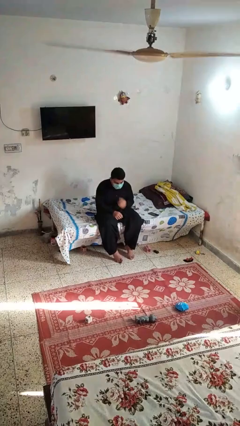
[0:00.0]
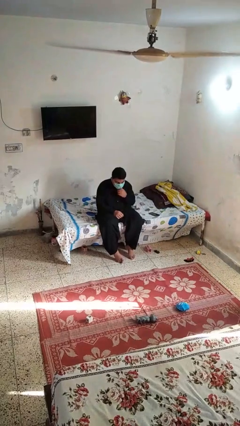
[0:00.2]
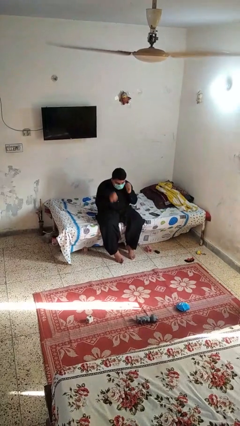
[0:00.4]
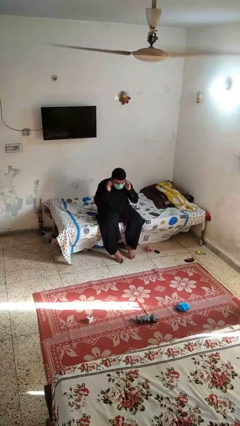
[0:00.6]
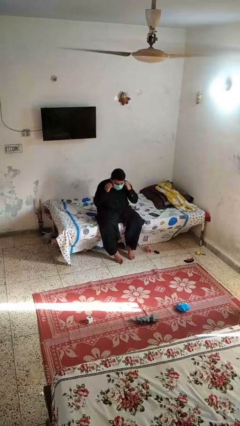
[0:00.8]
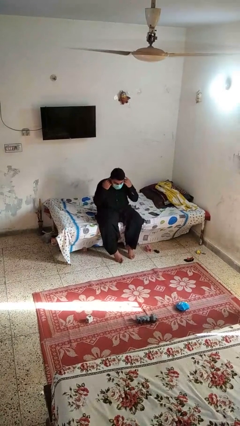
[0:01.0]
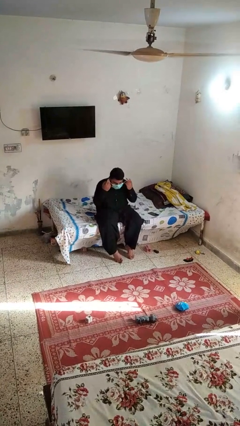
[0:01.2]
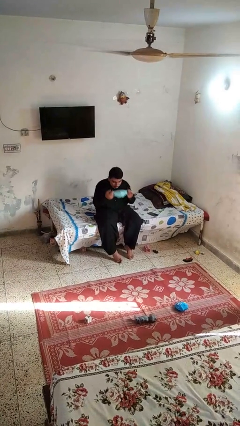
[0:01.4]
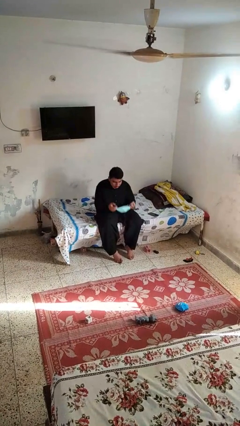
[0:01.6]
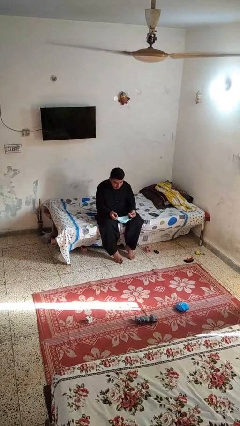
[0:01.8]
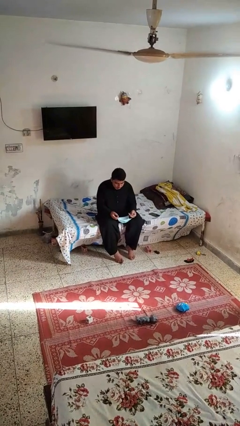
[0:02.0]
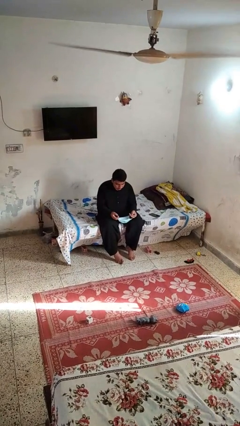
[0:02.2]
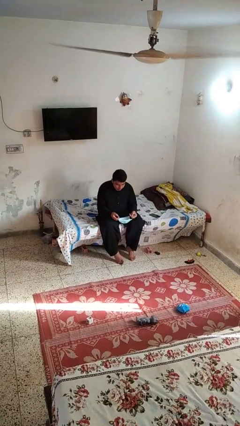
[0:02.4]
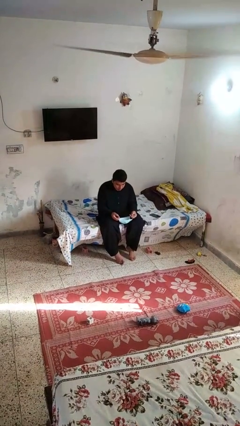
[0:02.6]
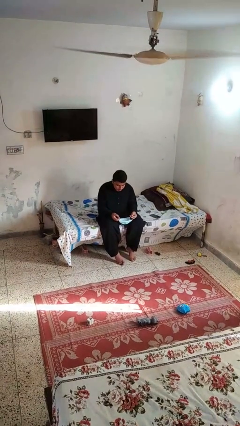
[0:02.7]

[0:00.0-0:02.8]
person takes off facemask

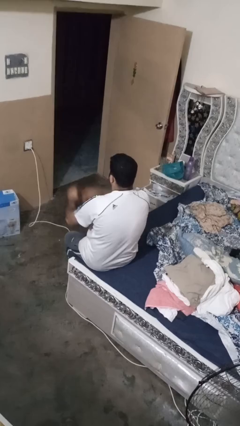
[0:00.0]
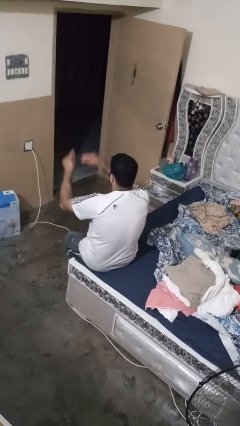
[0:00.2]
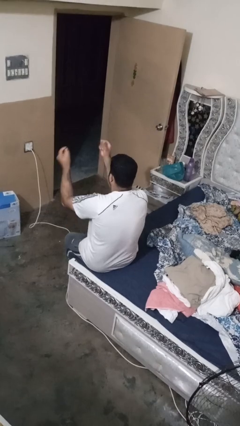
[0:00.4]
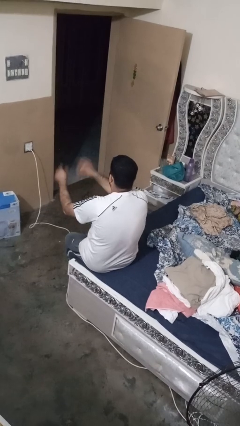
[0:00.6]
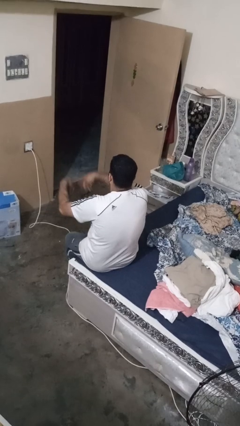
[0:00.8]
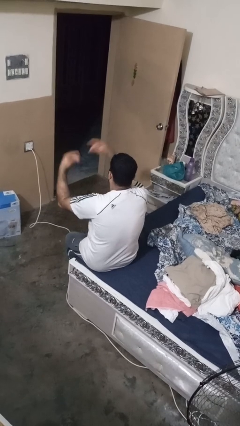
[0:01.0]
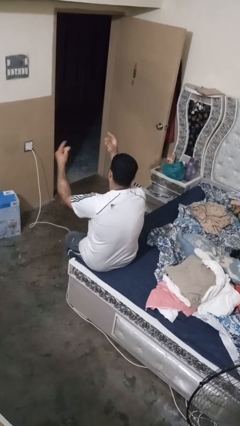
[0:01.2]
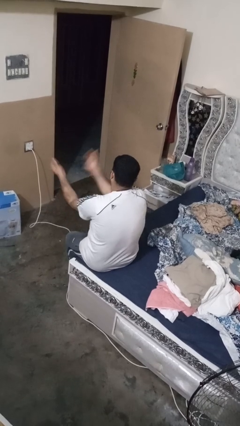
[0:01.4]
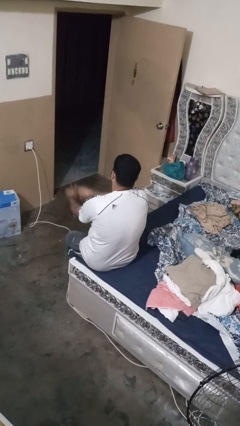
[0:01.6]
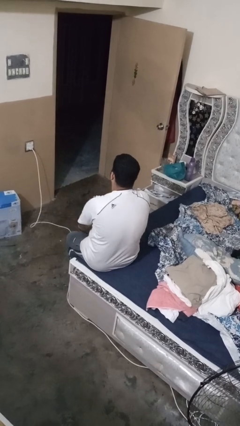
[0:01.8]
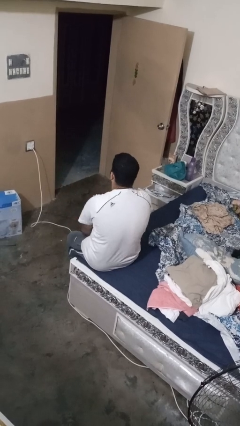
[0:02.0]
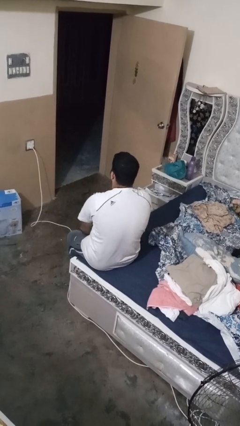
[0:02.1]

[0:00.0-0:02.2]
person snaps fingers

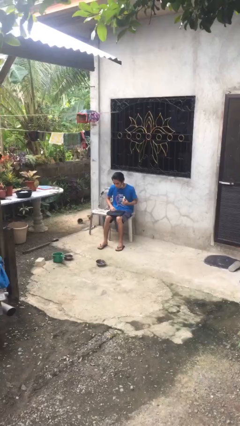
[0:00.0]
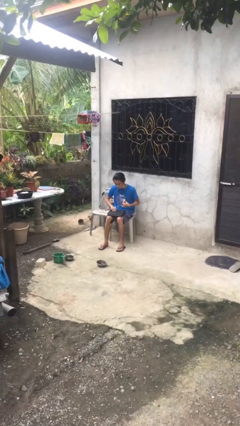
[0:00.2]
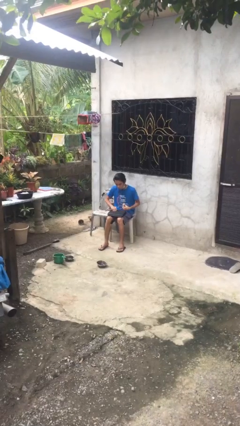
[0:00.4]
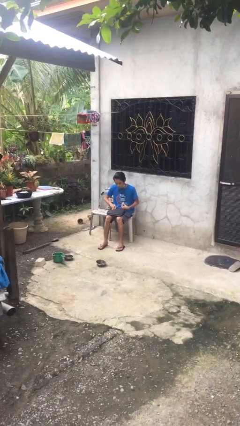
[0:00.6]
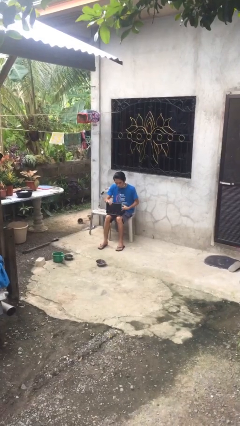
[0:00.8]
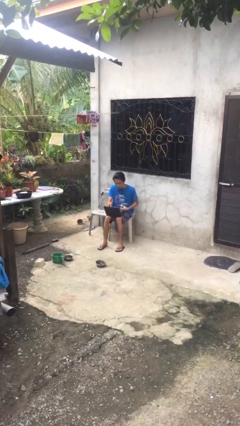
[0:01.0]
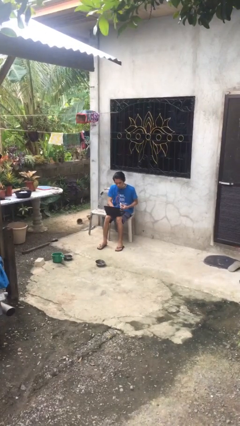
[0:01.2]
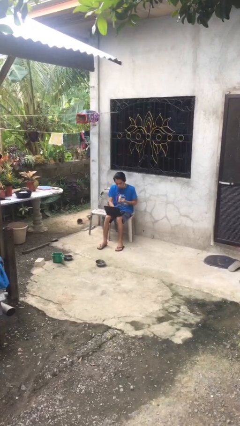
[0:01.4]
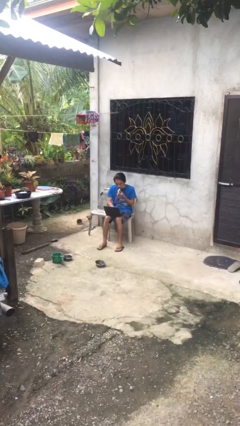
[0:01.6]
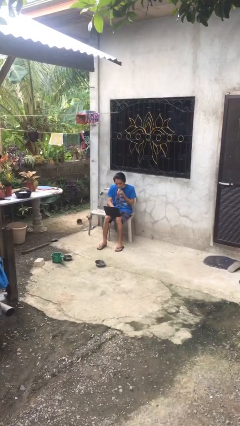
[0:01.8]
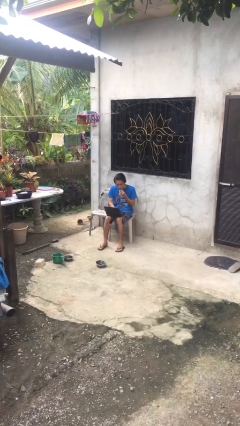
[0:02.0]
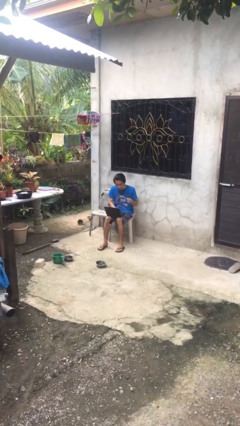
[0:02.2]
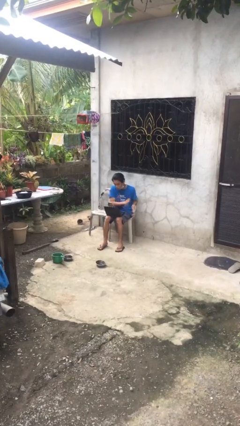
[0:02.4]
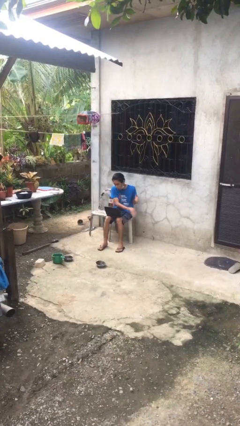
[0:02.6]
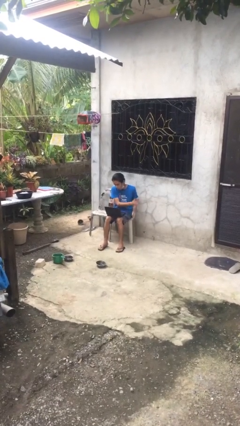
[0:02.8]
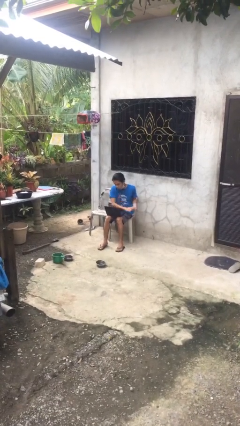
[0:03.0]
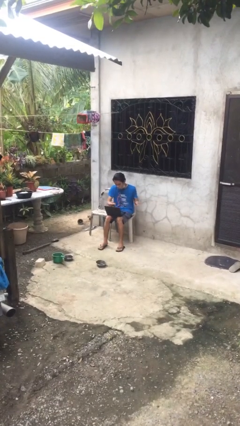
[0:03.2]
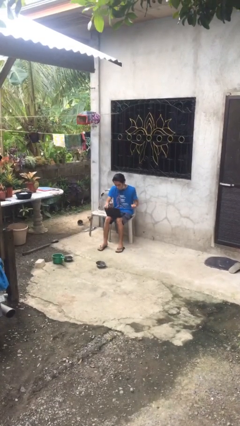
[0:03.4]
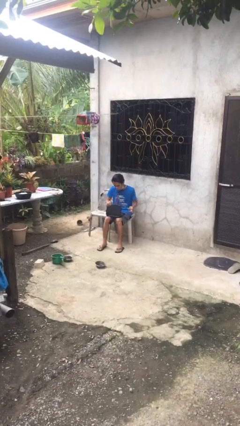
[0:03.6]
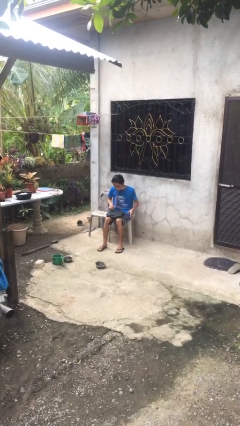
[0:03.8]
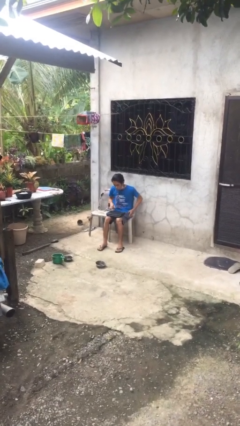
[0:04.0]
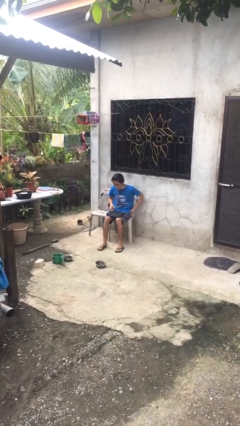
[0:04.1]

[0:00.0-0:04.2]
person interacts with laptop

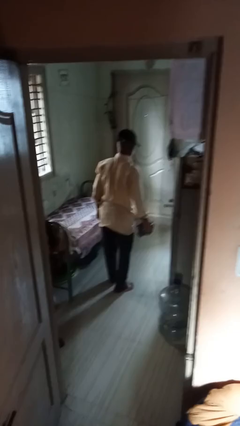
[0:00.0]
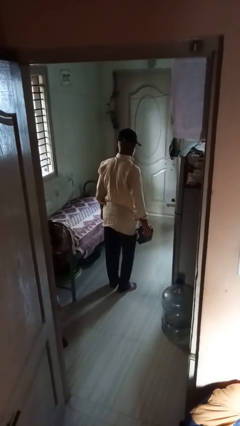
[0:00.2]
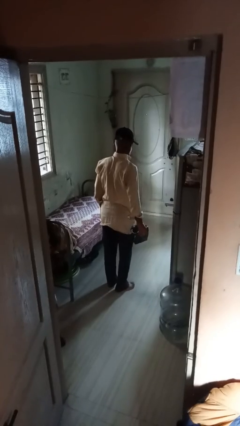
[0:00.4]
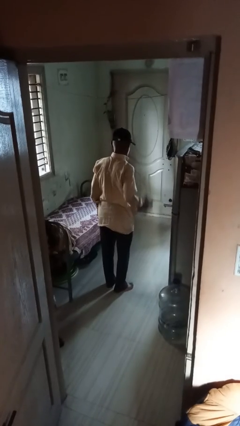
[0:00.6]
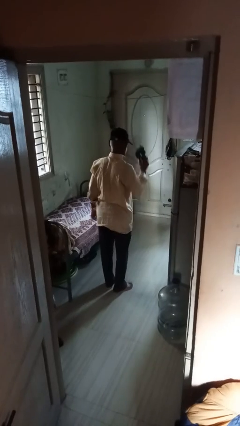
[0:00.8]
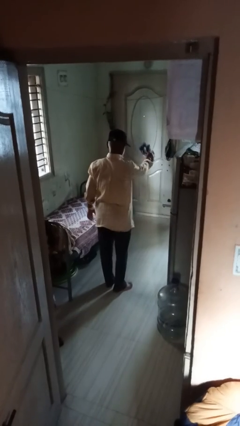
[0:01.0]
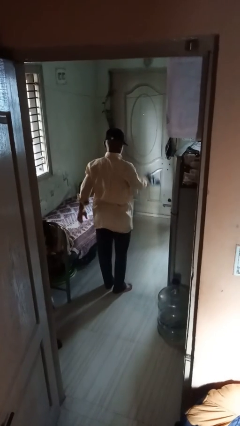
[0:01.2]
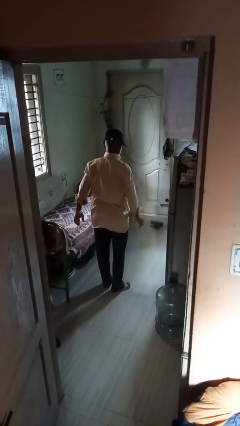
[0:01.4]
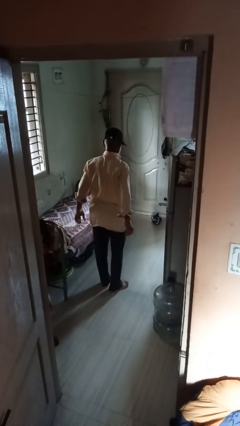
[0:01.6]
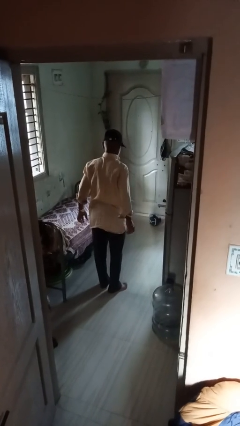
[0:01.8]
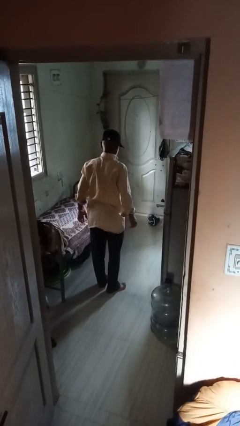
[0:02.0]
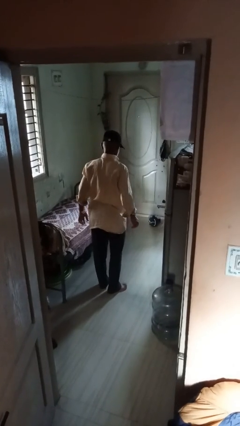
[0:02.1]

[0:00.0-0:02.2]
person throws object to ground

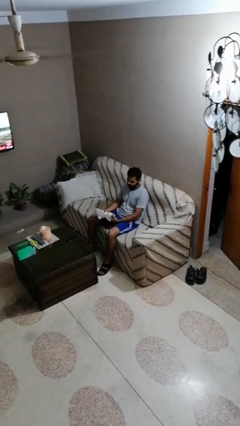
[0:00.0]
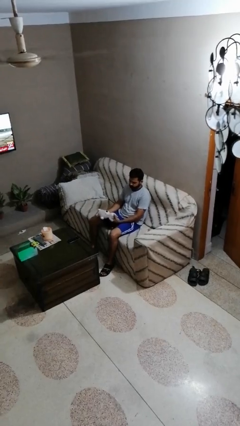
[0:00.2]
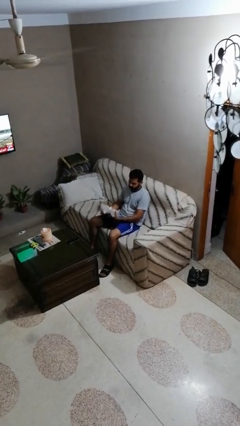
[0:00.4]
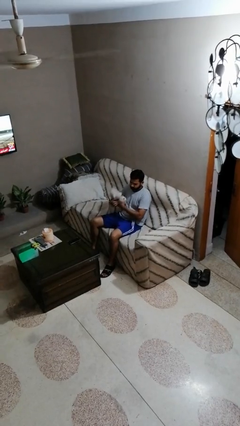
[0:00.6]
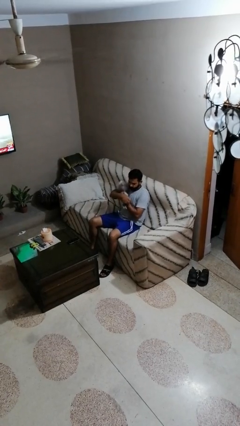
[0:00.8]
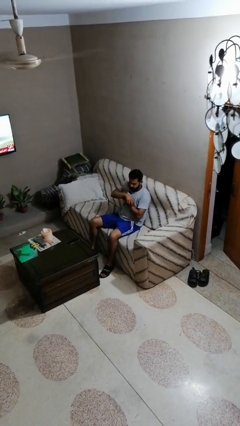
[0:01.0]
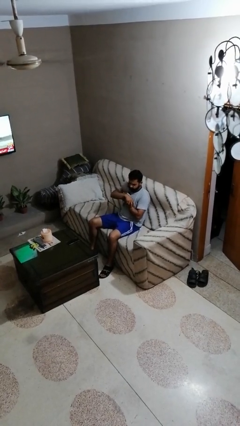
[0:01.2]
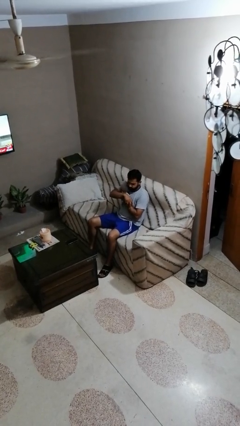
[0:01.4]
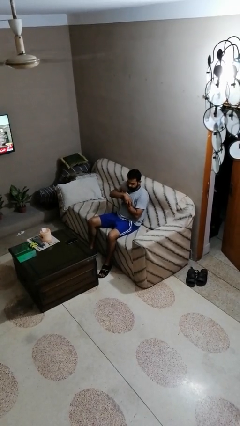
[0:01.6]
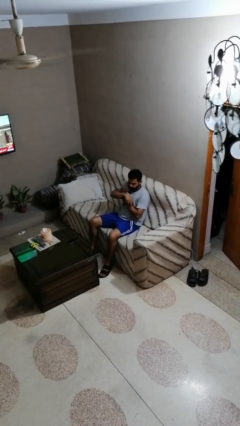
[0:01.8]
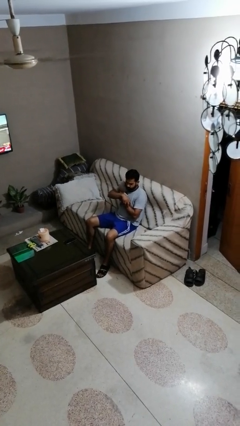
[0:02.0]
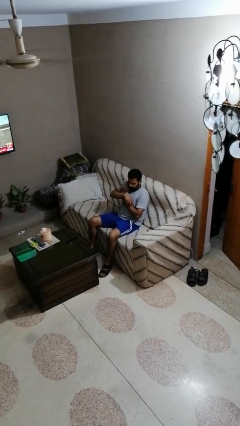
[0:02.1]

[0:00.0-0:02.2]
person hugs stuffed animal

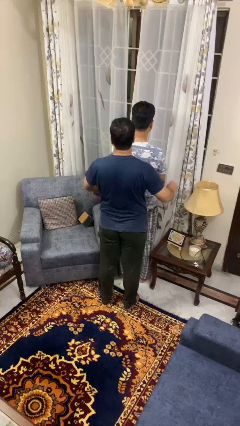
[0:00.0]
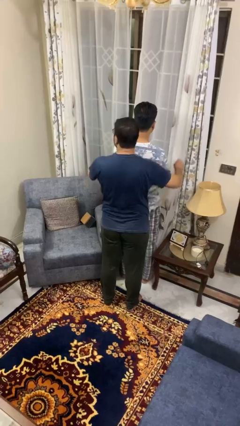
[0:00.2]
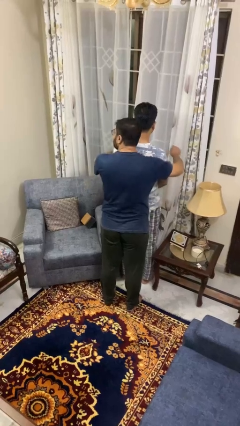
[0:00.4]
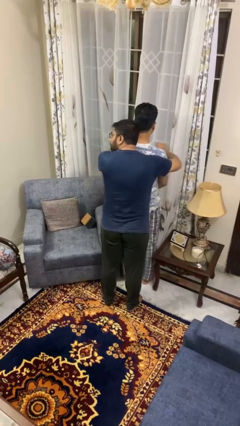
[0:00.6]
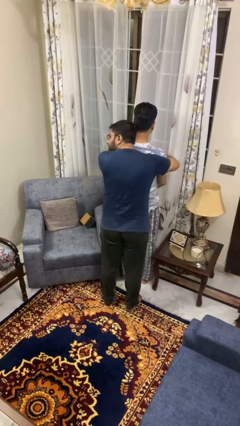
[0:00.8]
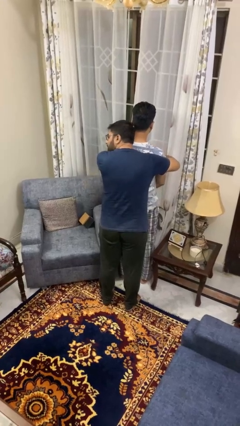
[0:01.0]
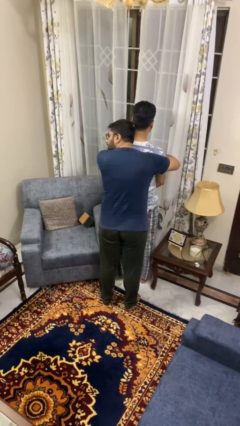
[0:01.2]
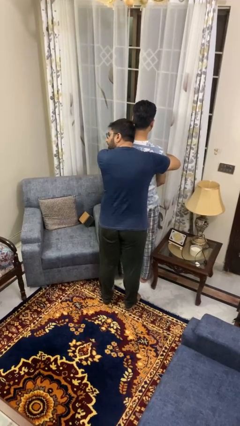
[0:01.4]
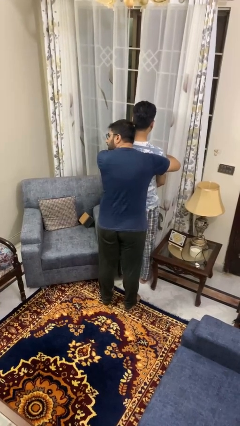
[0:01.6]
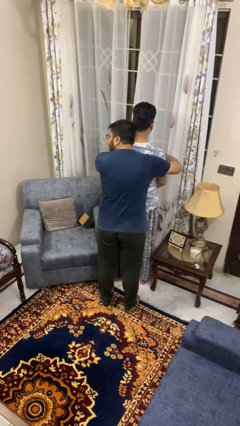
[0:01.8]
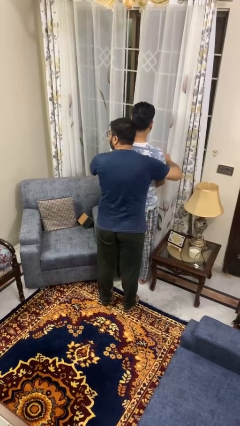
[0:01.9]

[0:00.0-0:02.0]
person hugs person from behind

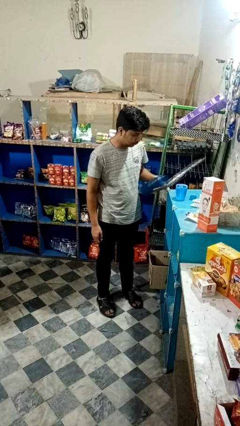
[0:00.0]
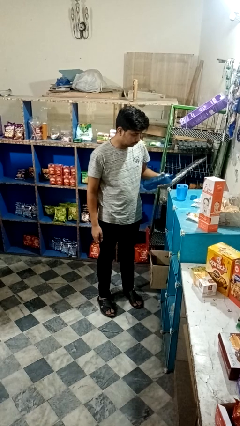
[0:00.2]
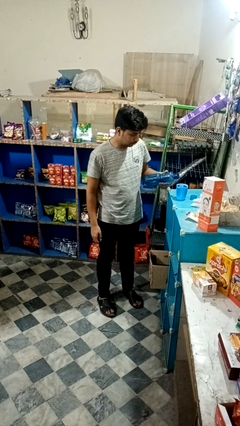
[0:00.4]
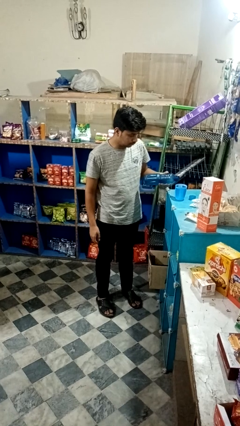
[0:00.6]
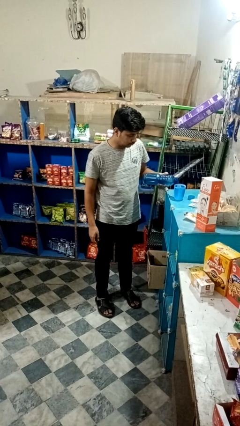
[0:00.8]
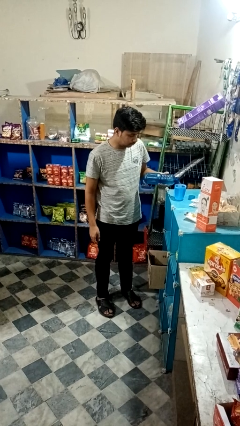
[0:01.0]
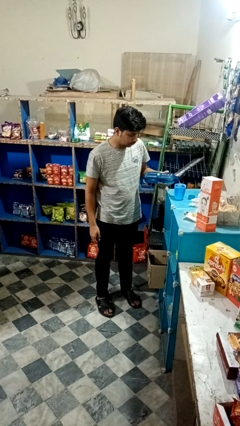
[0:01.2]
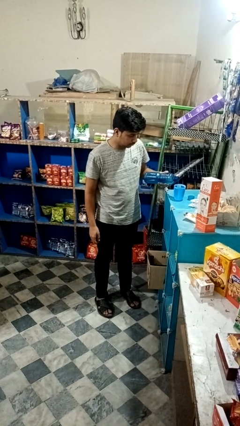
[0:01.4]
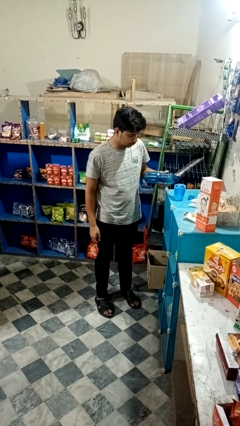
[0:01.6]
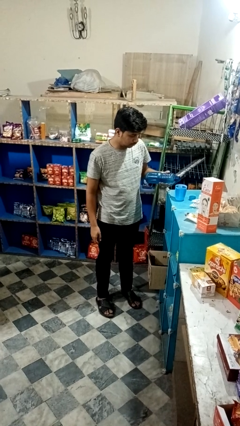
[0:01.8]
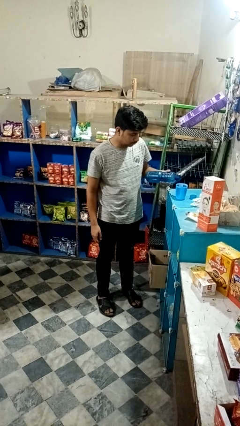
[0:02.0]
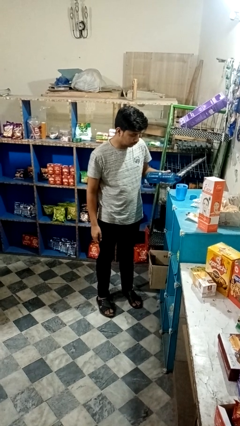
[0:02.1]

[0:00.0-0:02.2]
person pours liquid into cup
